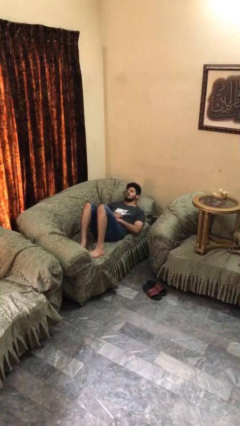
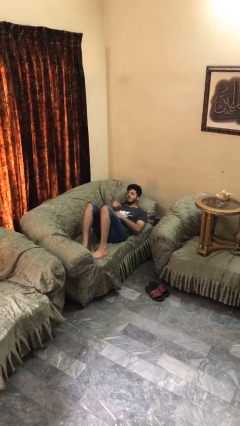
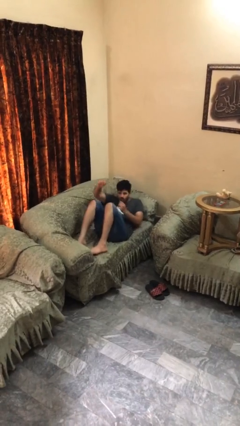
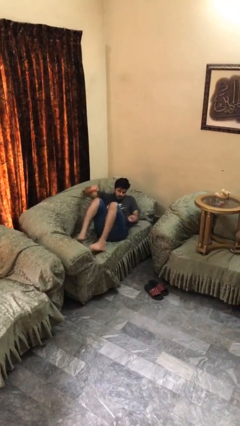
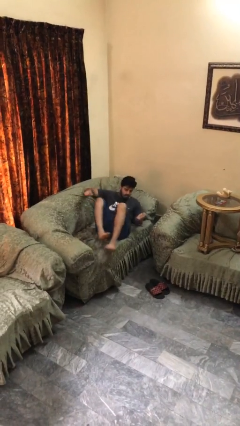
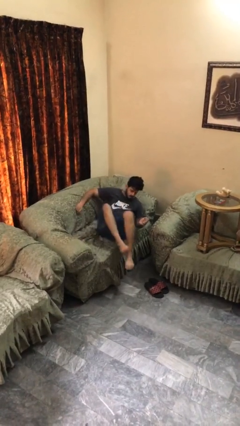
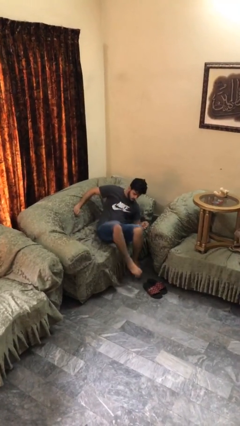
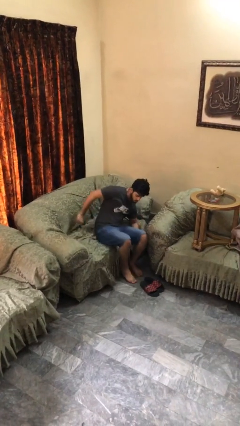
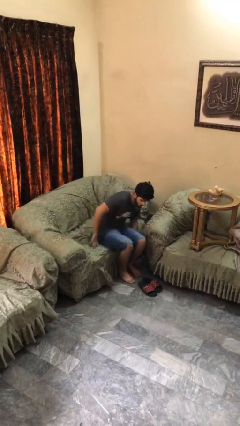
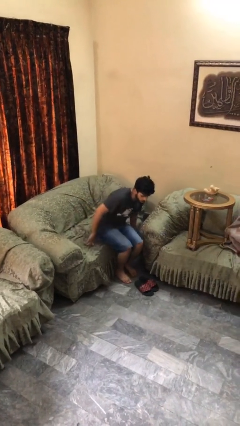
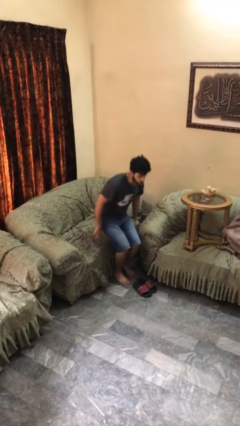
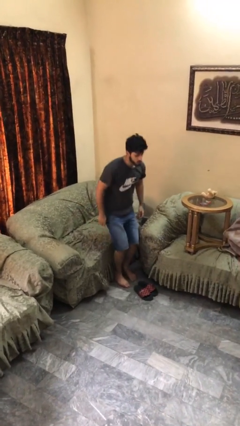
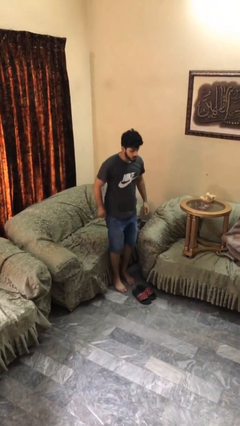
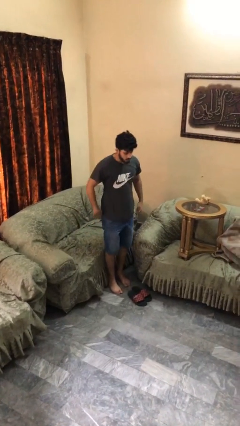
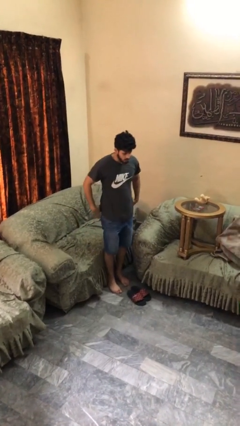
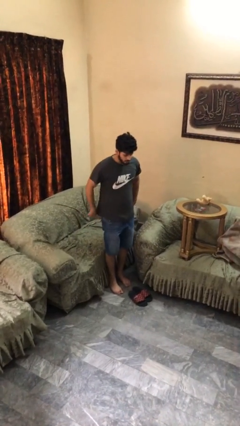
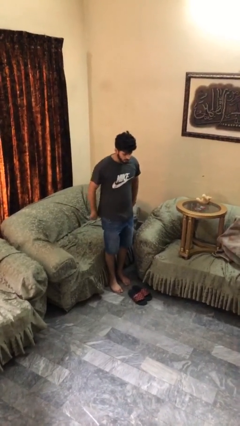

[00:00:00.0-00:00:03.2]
person stands up

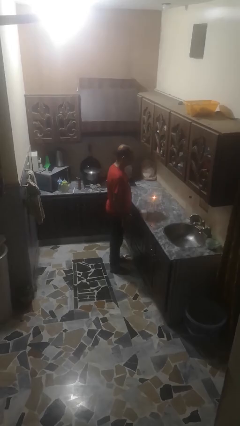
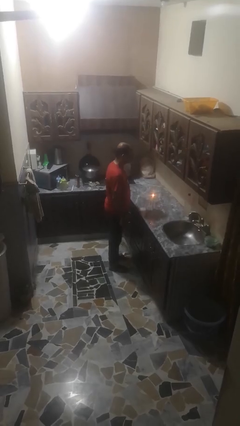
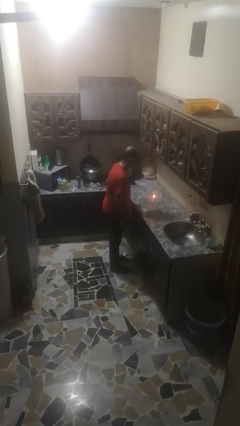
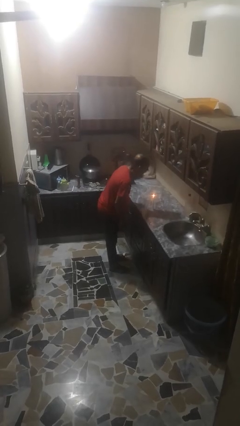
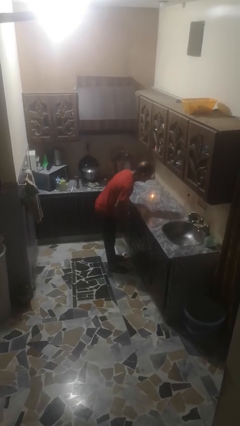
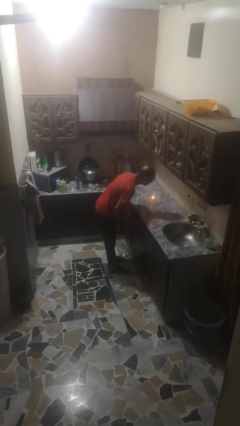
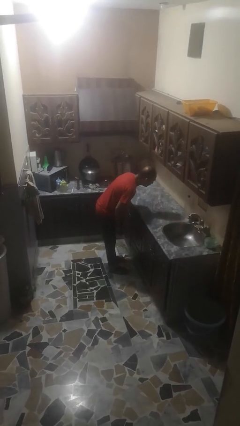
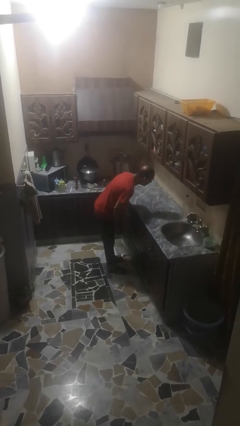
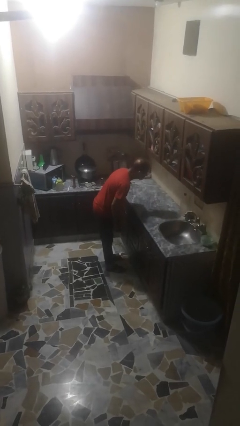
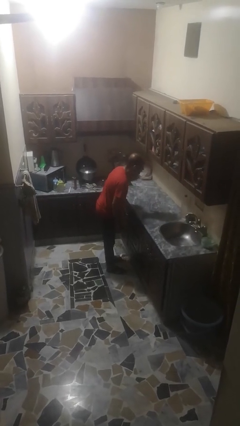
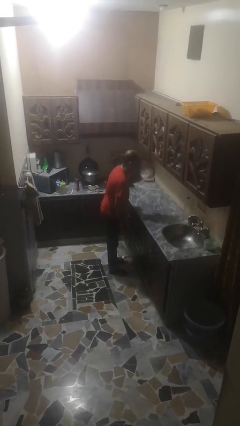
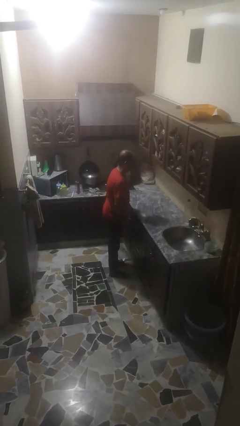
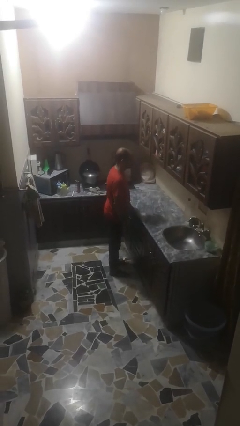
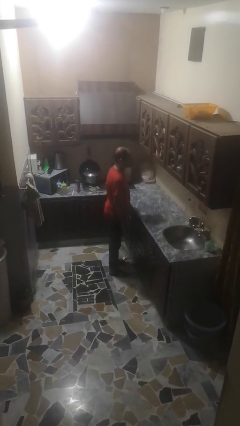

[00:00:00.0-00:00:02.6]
person extinguishes candle

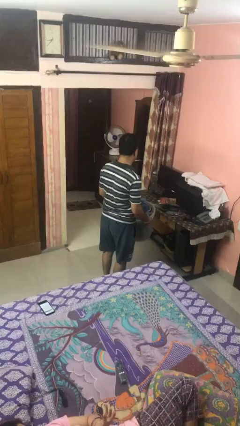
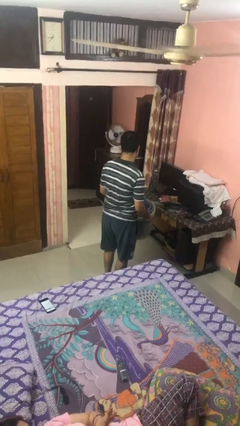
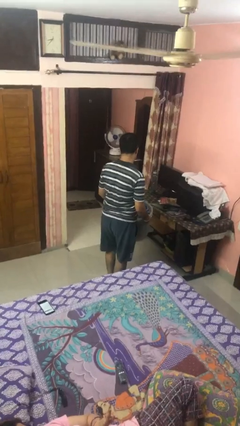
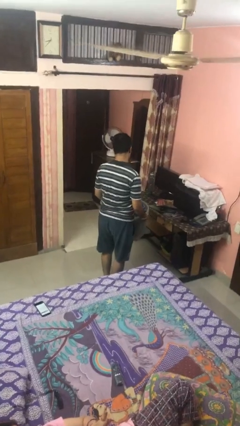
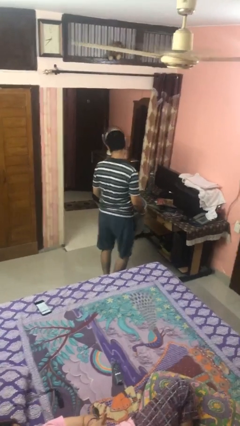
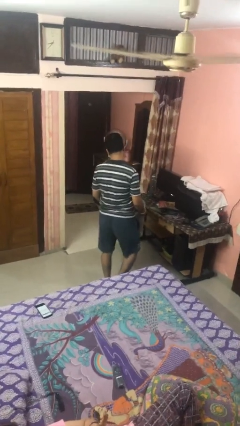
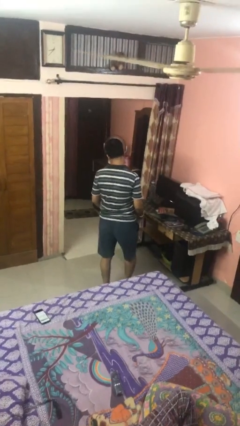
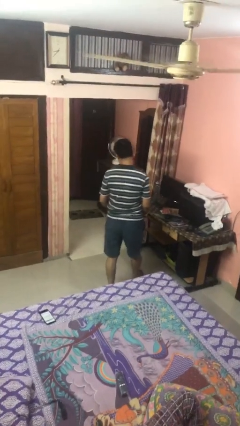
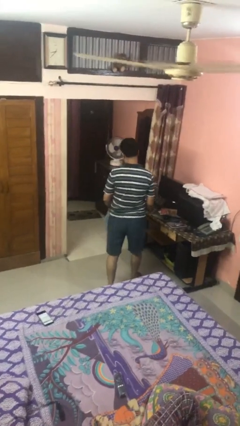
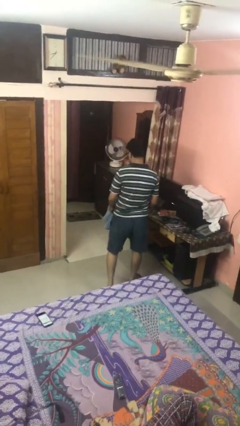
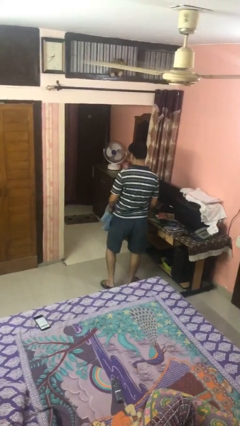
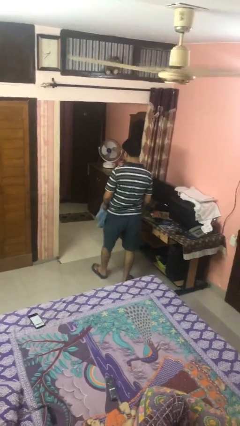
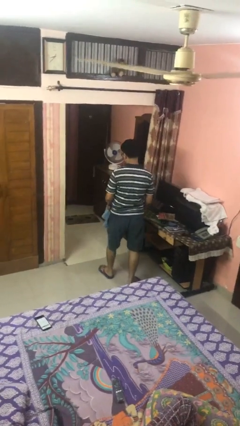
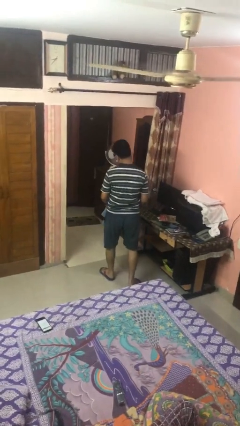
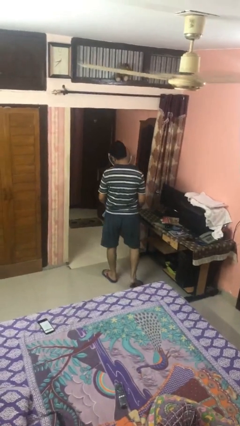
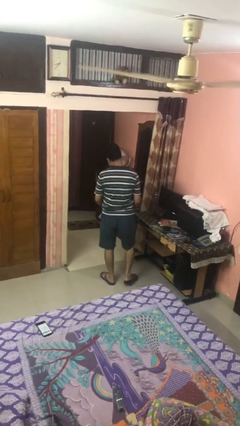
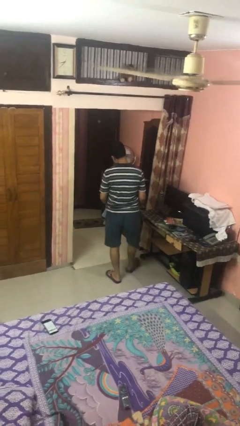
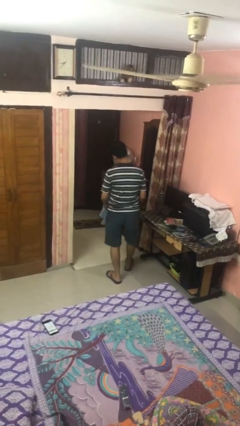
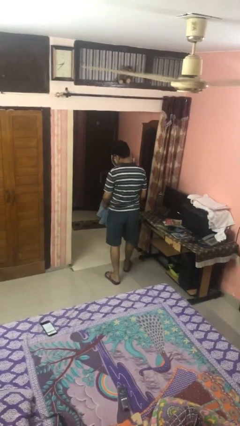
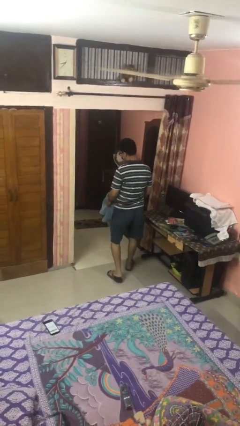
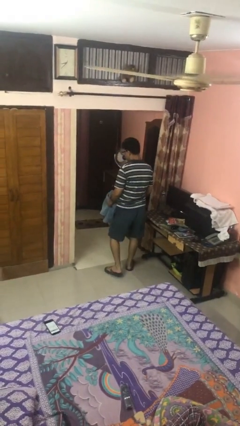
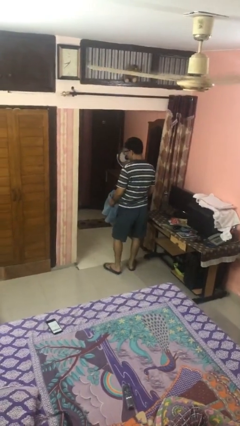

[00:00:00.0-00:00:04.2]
person carries laundry basket

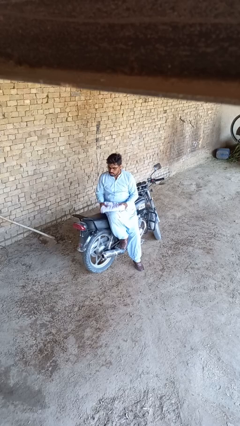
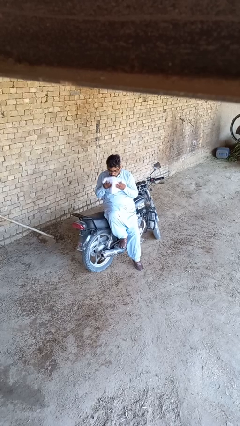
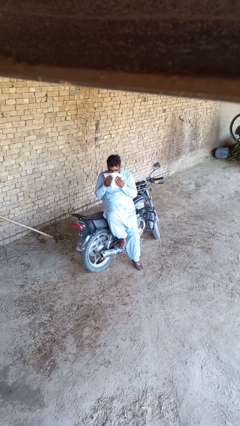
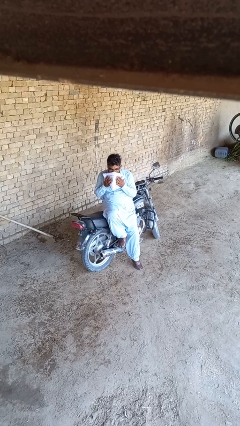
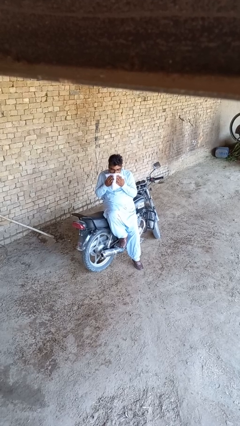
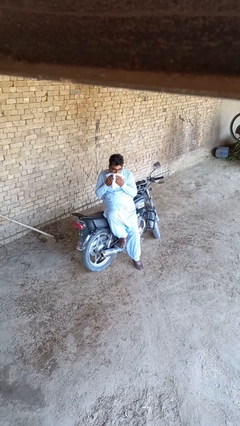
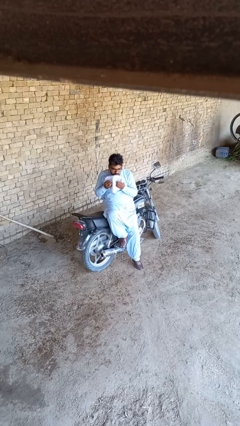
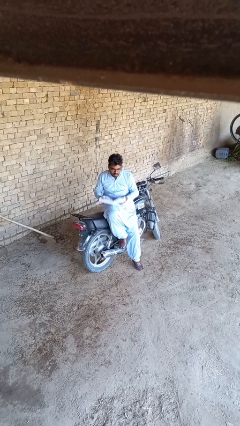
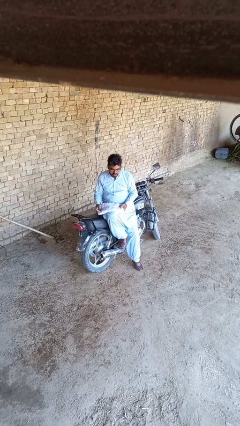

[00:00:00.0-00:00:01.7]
person wipes mouth with napkin

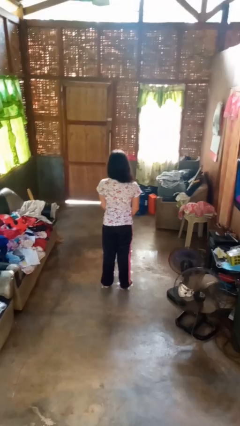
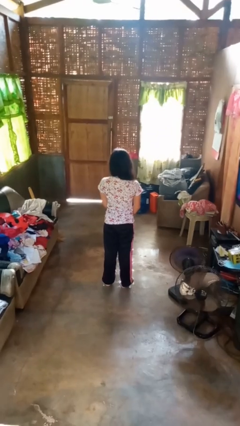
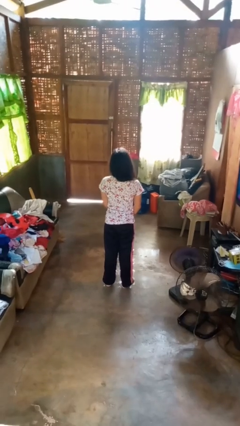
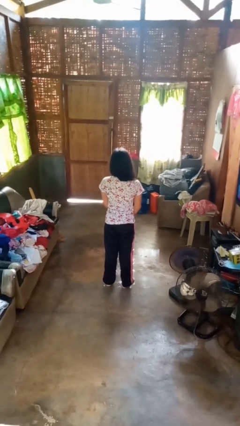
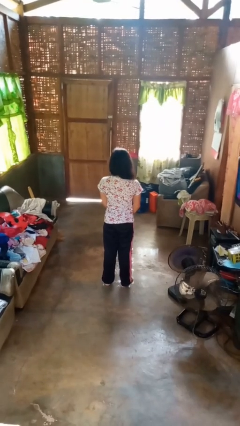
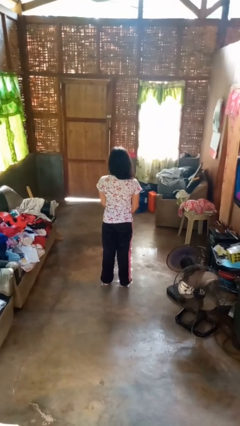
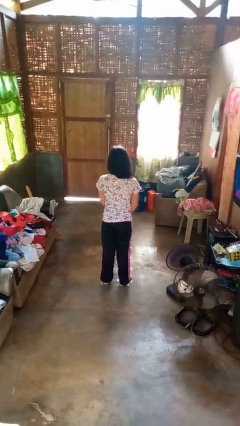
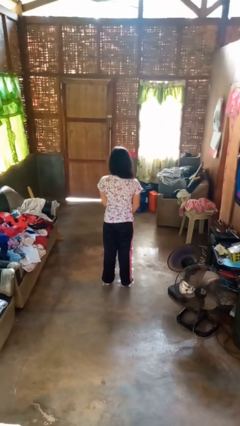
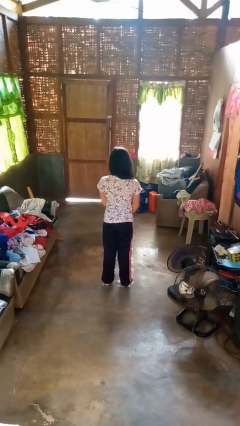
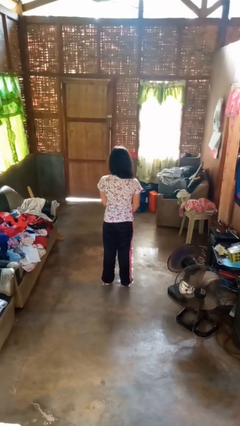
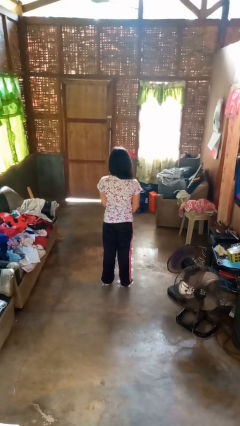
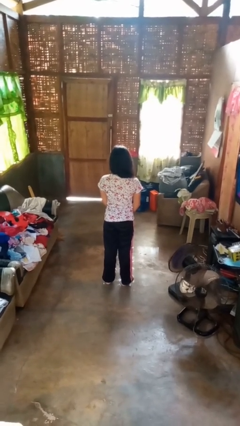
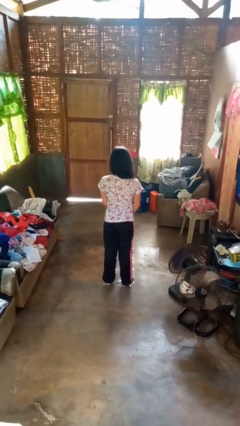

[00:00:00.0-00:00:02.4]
person nods head

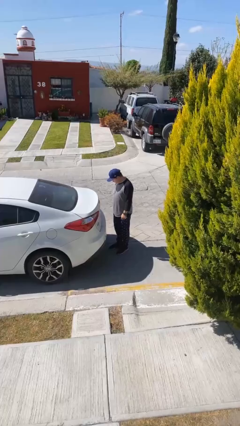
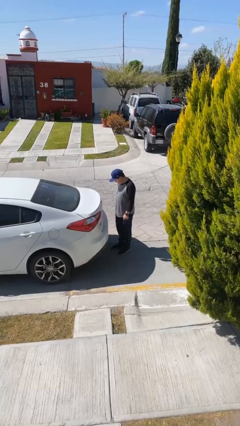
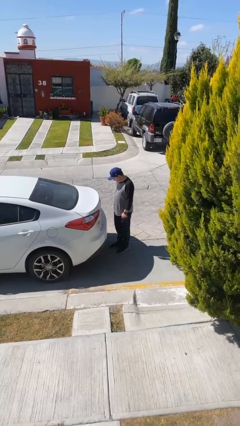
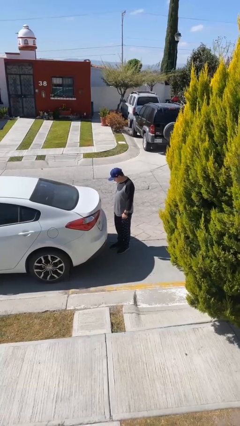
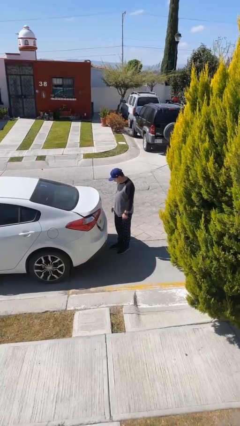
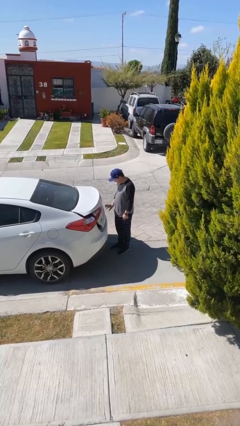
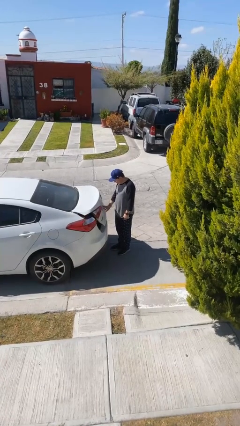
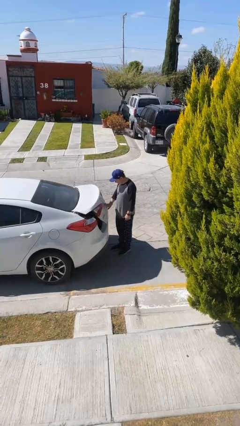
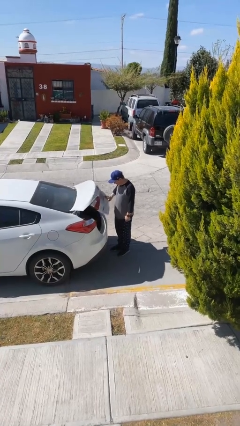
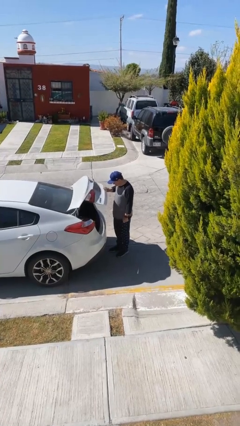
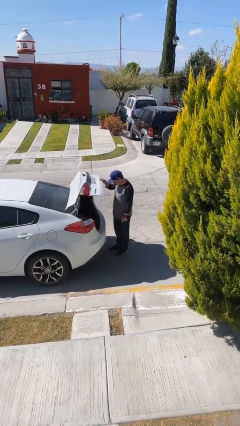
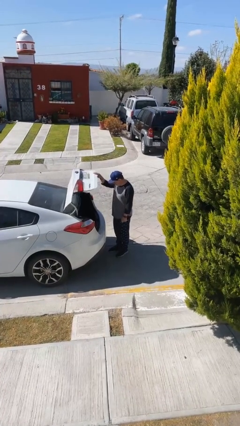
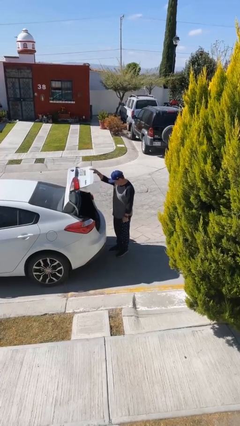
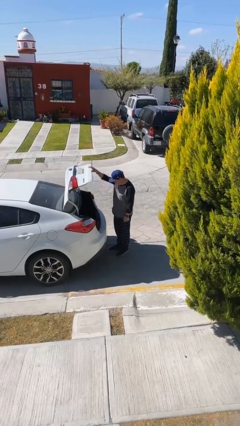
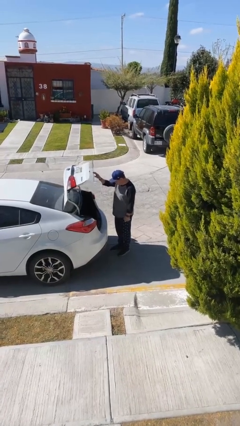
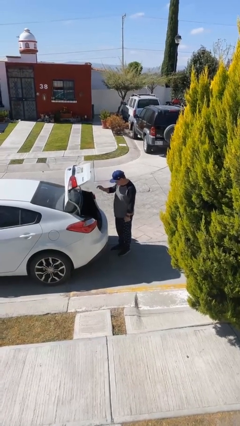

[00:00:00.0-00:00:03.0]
person opens car trunk

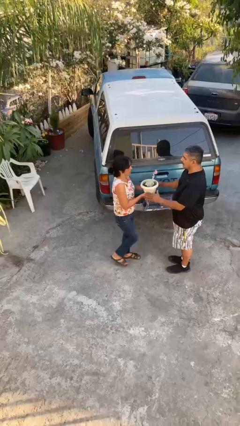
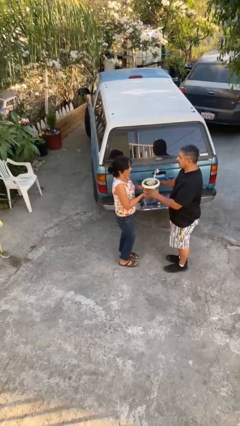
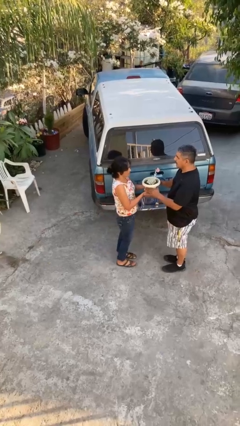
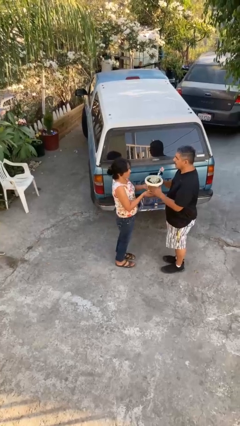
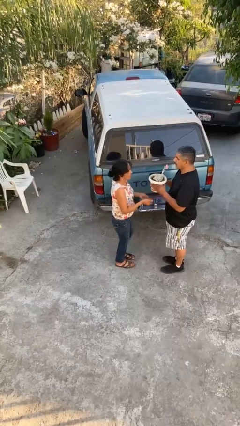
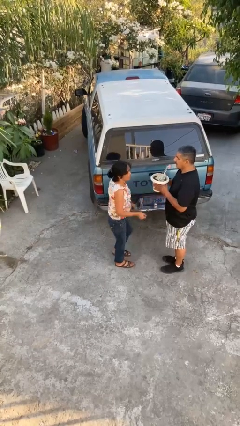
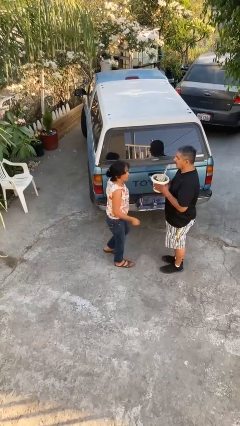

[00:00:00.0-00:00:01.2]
person transfers object to person
